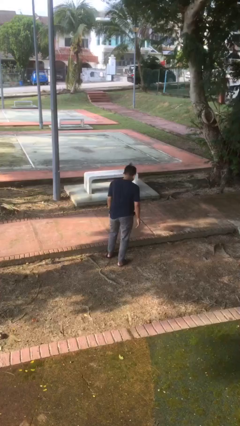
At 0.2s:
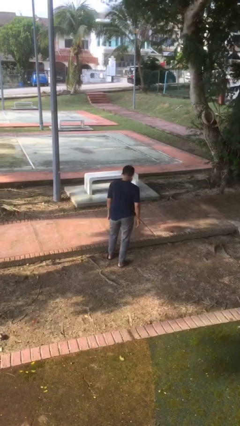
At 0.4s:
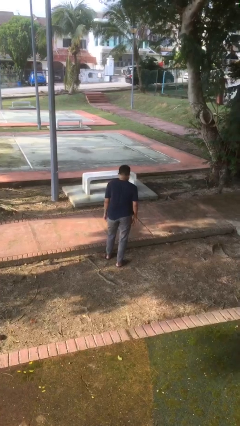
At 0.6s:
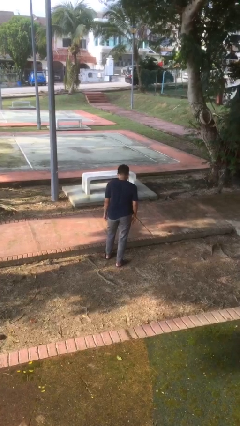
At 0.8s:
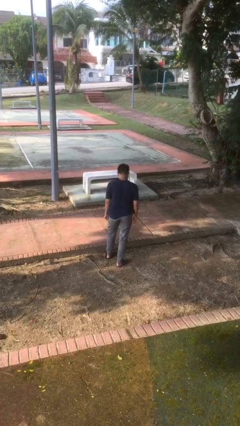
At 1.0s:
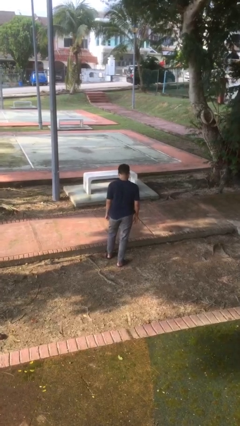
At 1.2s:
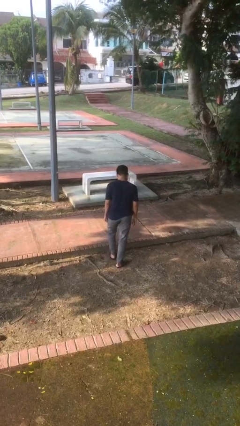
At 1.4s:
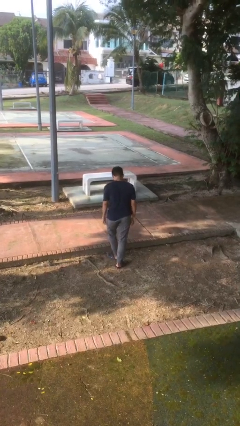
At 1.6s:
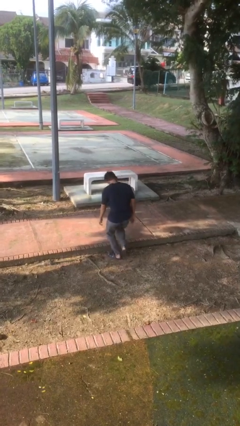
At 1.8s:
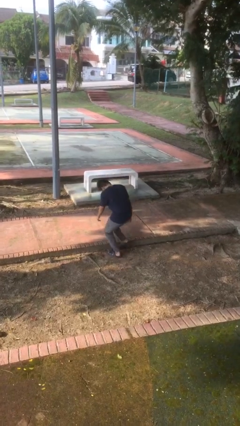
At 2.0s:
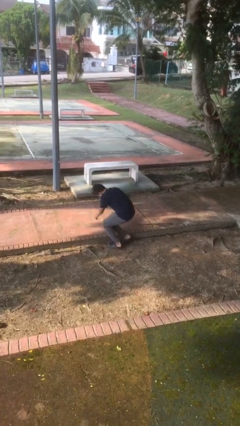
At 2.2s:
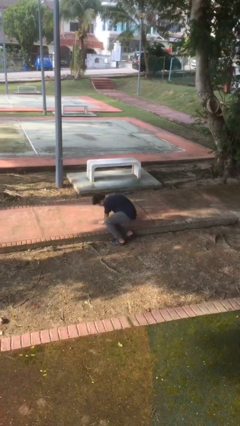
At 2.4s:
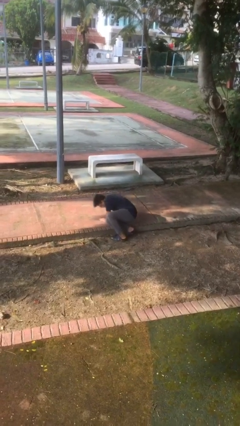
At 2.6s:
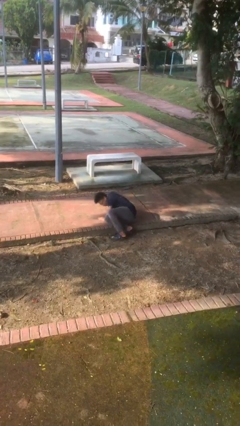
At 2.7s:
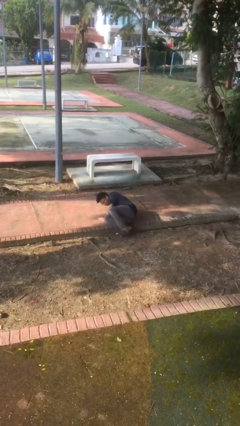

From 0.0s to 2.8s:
person trips on object on floor

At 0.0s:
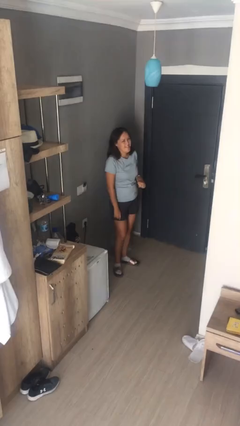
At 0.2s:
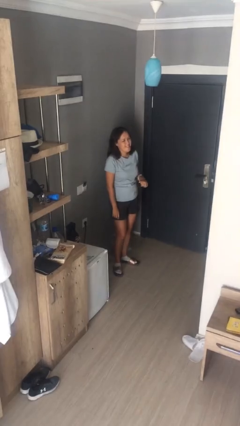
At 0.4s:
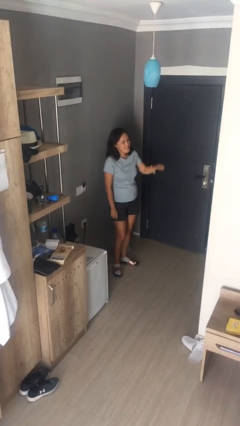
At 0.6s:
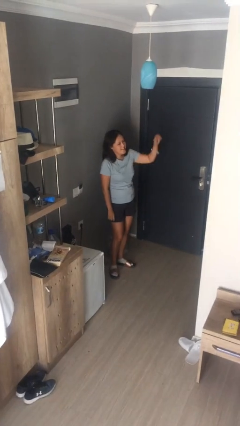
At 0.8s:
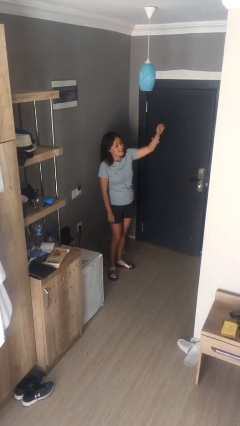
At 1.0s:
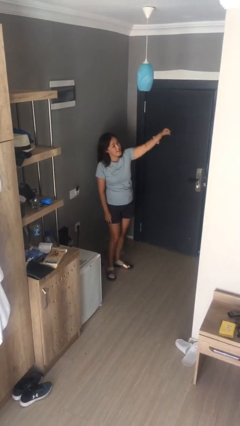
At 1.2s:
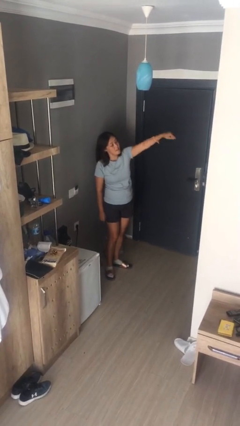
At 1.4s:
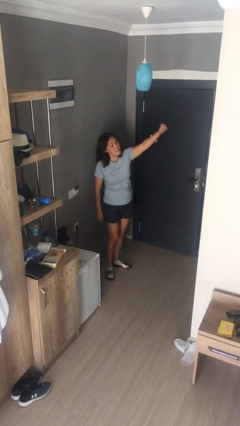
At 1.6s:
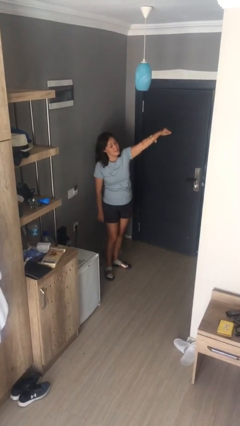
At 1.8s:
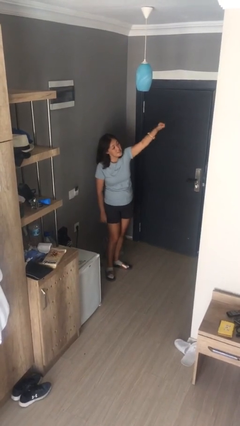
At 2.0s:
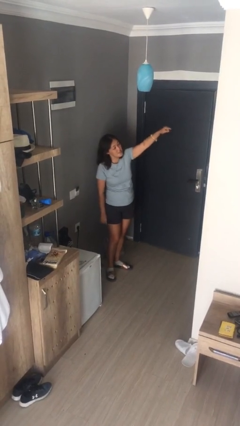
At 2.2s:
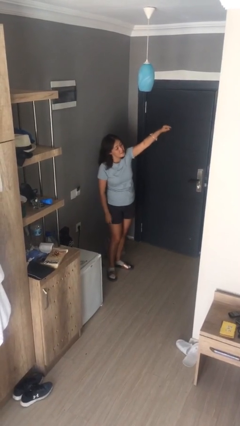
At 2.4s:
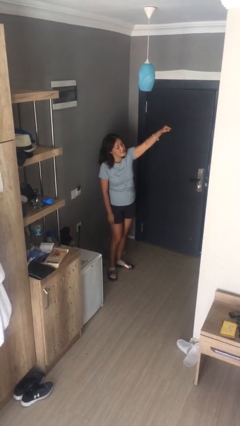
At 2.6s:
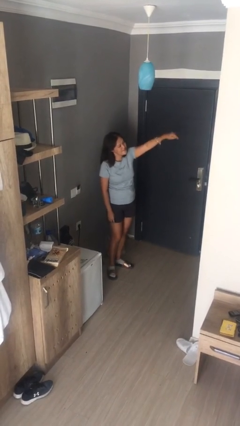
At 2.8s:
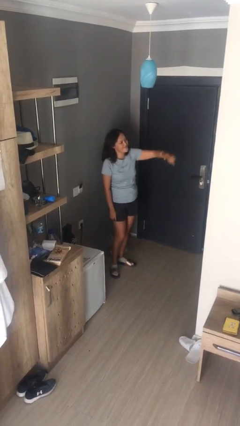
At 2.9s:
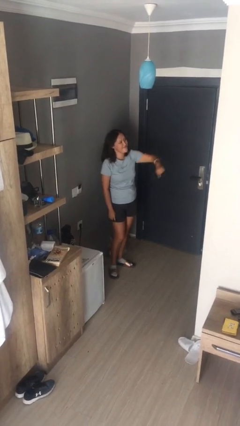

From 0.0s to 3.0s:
person points at person

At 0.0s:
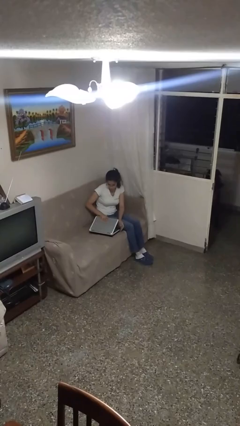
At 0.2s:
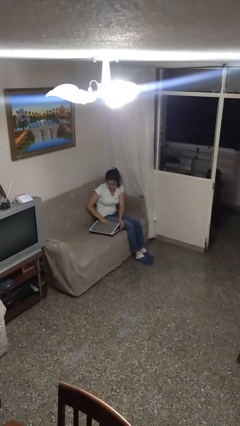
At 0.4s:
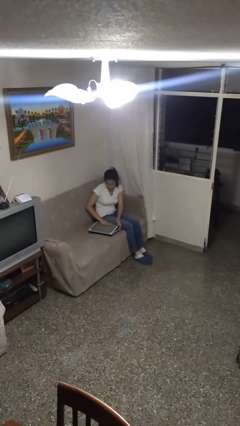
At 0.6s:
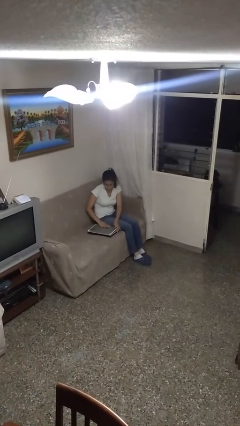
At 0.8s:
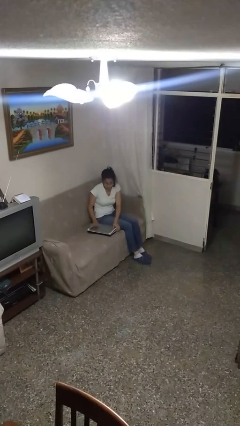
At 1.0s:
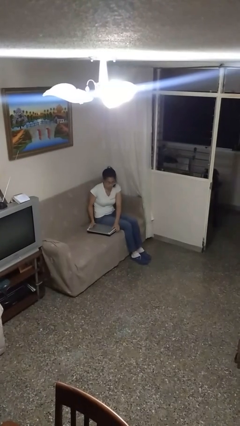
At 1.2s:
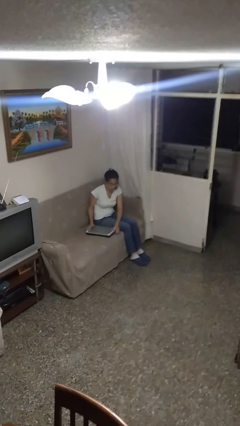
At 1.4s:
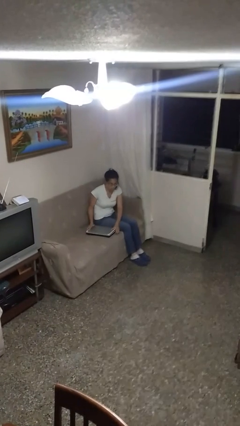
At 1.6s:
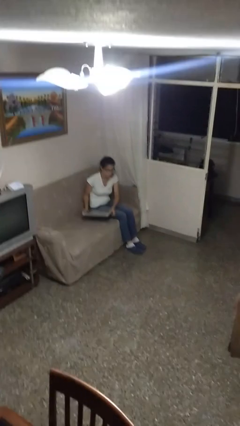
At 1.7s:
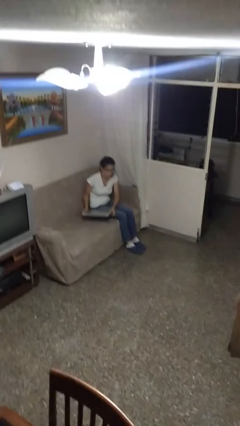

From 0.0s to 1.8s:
person closes laptop

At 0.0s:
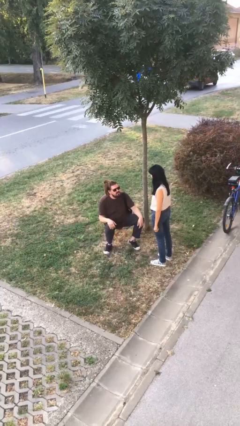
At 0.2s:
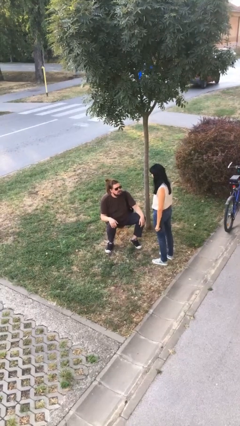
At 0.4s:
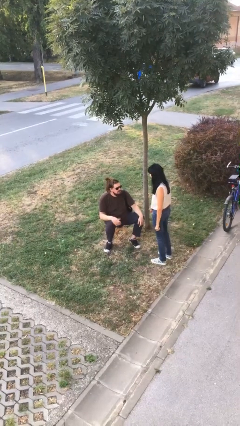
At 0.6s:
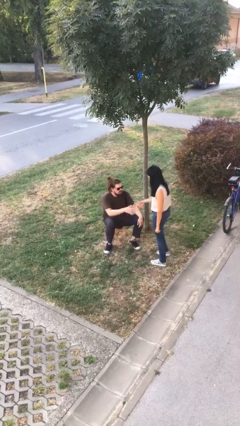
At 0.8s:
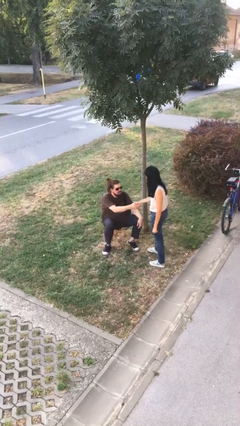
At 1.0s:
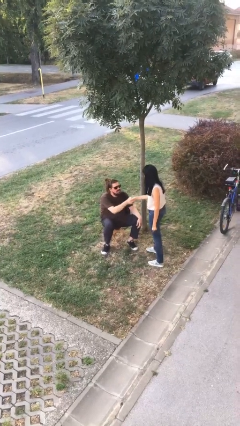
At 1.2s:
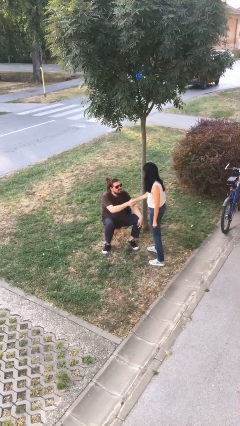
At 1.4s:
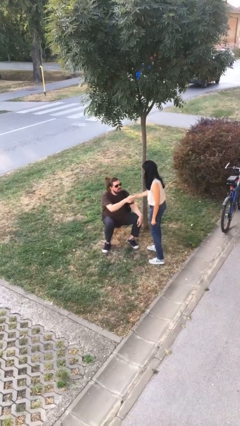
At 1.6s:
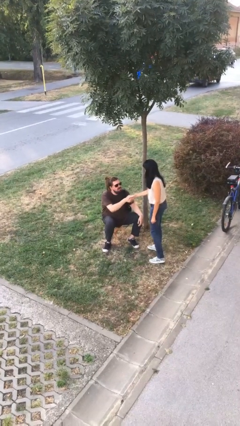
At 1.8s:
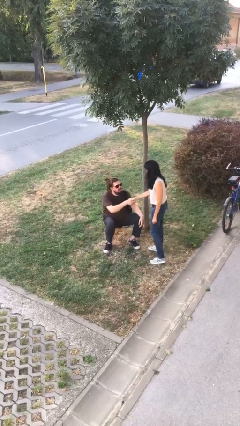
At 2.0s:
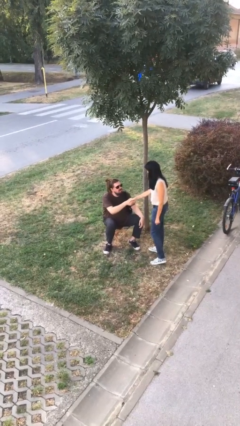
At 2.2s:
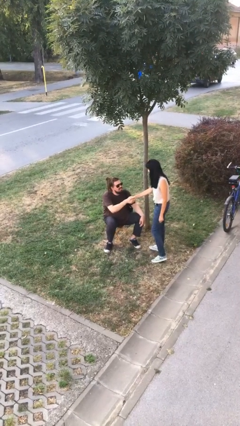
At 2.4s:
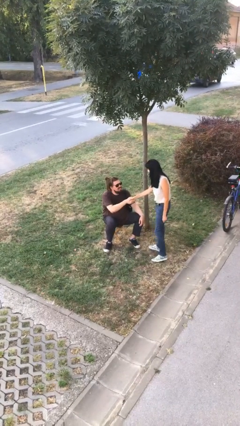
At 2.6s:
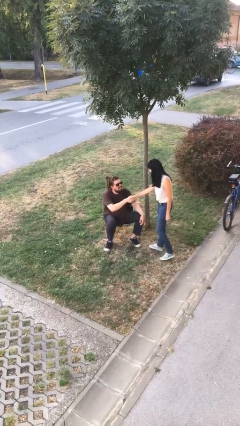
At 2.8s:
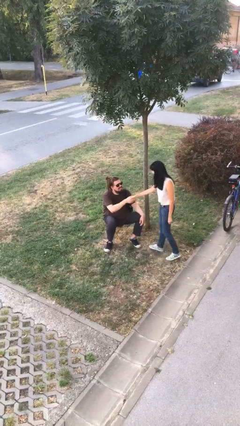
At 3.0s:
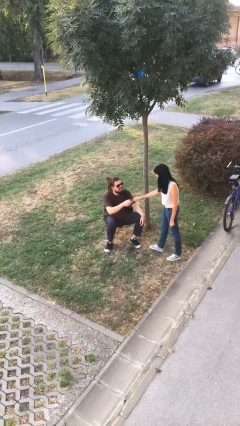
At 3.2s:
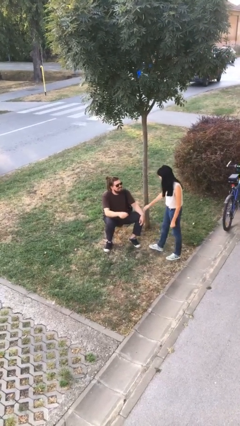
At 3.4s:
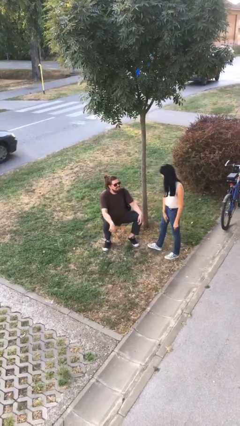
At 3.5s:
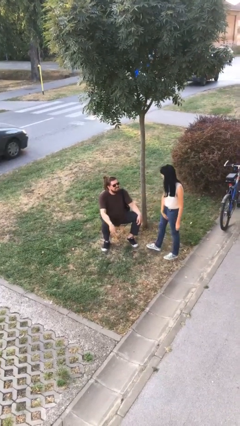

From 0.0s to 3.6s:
person shakes hand

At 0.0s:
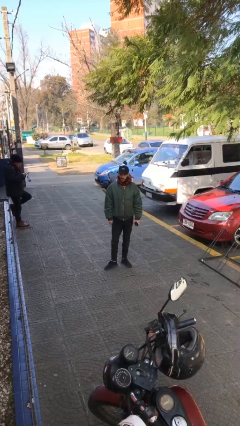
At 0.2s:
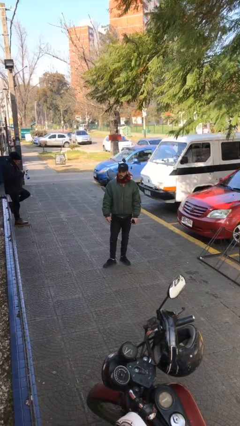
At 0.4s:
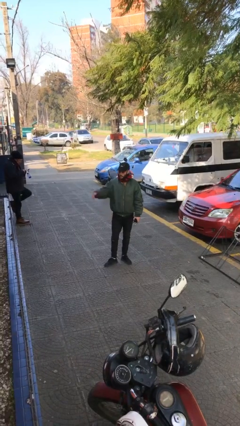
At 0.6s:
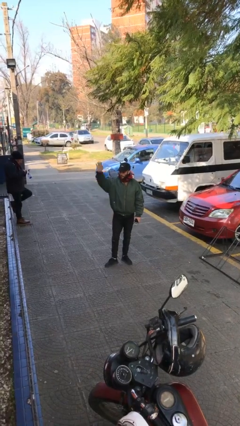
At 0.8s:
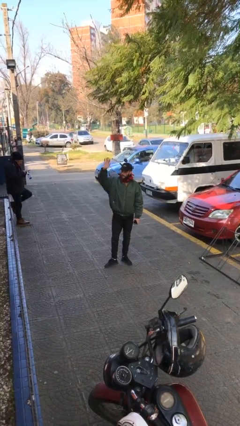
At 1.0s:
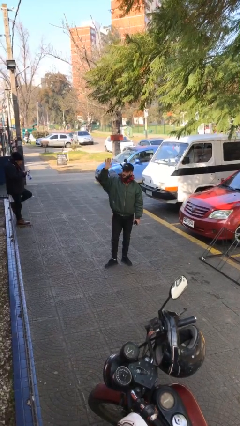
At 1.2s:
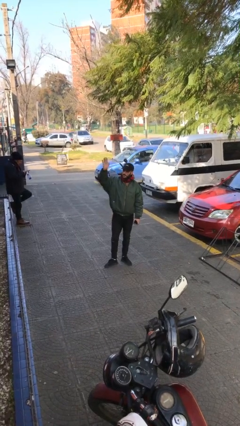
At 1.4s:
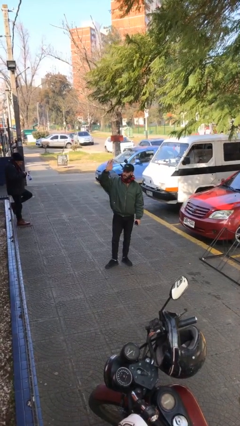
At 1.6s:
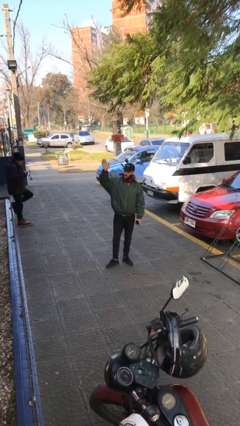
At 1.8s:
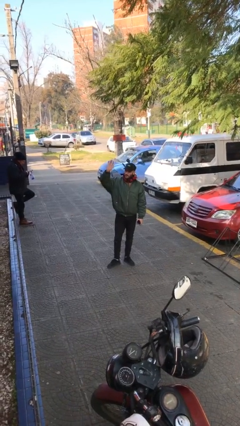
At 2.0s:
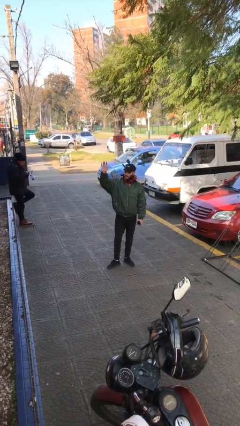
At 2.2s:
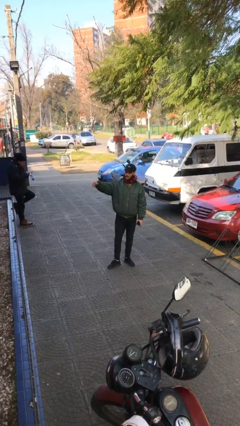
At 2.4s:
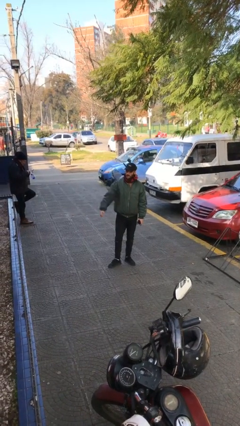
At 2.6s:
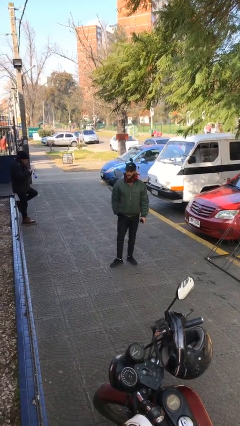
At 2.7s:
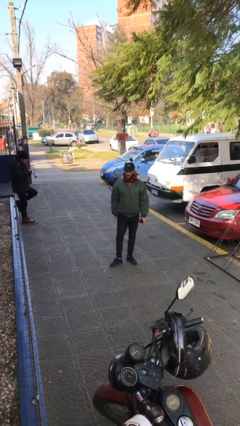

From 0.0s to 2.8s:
person waves at person

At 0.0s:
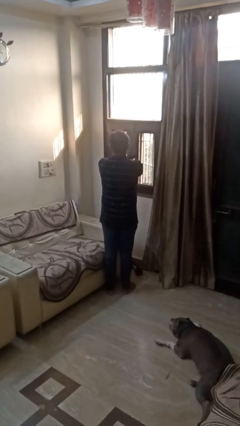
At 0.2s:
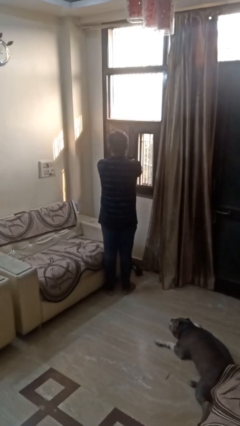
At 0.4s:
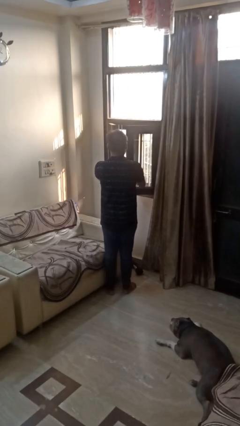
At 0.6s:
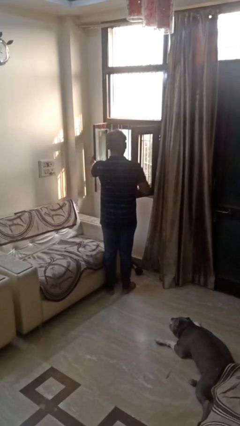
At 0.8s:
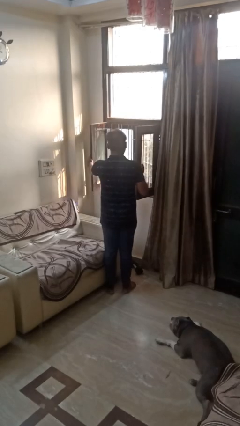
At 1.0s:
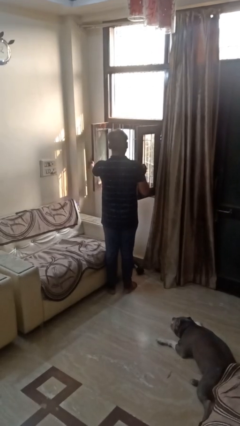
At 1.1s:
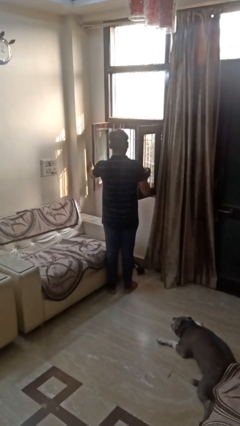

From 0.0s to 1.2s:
person opens home window

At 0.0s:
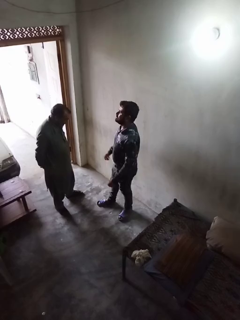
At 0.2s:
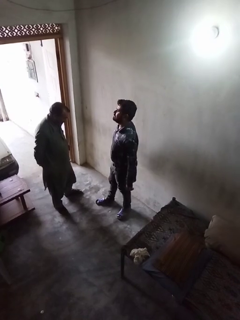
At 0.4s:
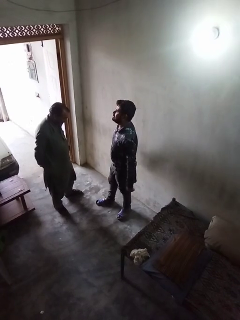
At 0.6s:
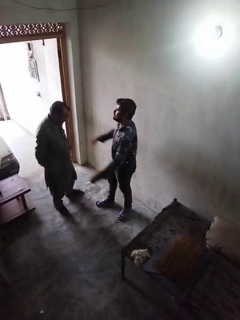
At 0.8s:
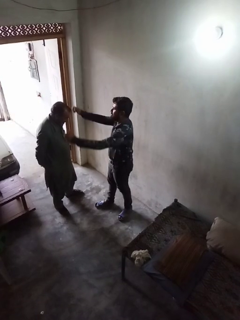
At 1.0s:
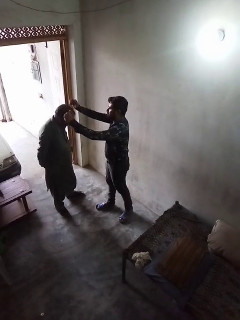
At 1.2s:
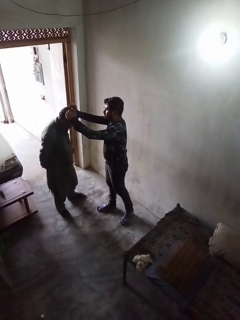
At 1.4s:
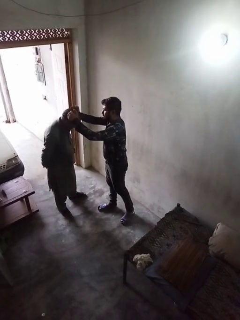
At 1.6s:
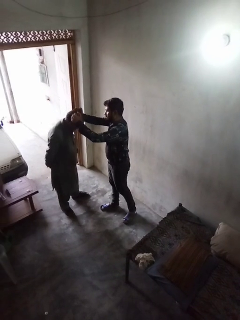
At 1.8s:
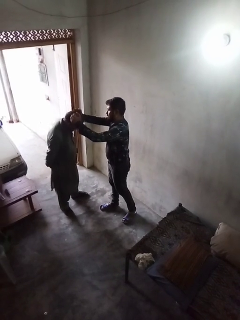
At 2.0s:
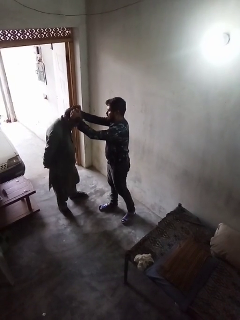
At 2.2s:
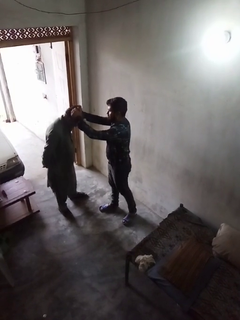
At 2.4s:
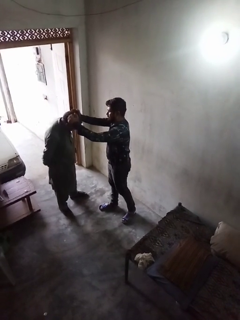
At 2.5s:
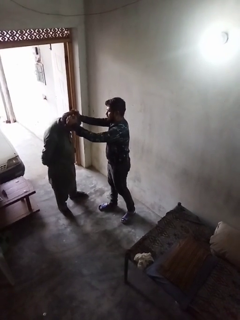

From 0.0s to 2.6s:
person grabs person by hair

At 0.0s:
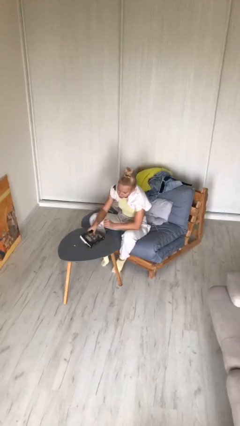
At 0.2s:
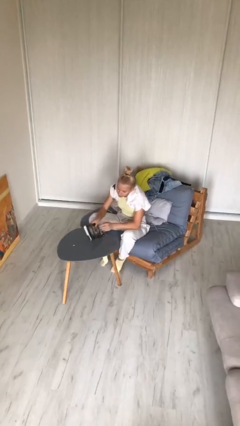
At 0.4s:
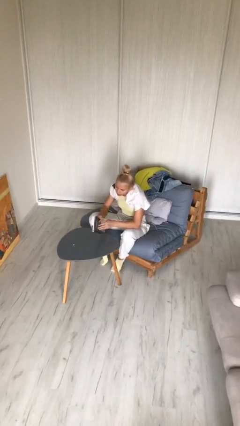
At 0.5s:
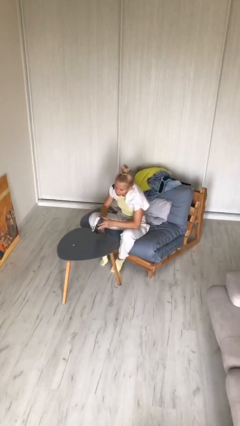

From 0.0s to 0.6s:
person picks up object from table
